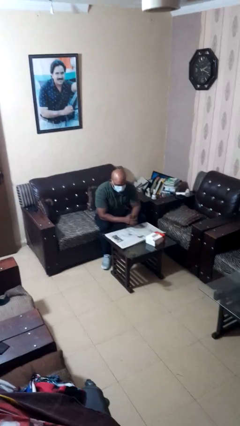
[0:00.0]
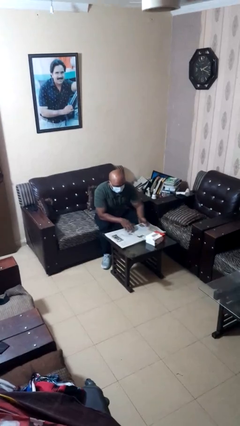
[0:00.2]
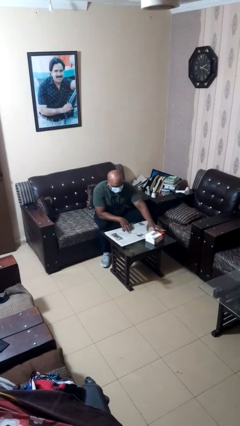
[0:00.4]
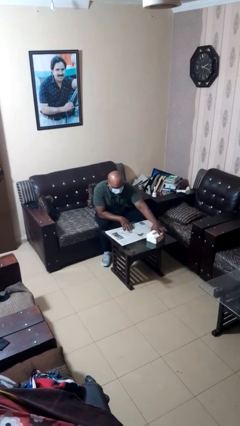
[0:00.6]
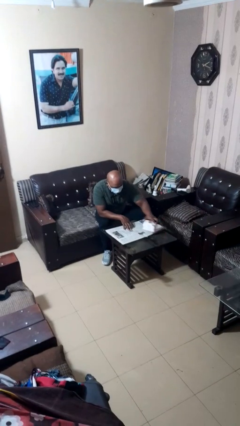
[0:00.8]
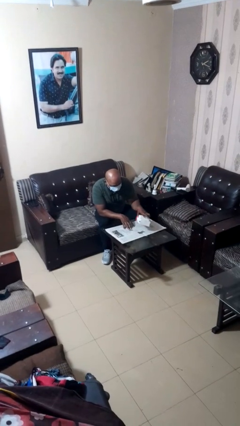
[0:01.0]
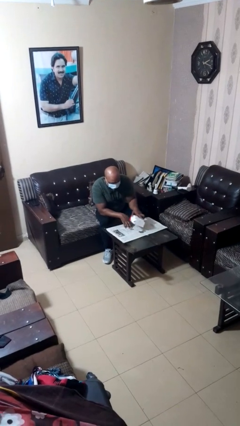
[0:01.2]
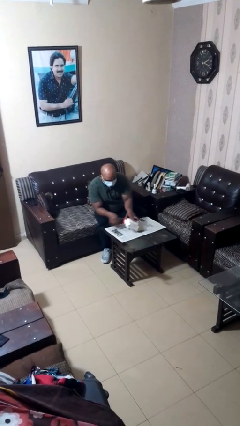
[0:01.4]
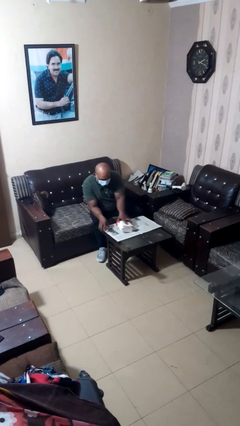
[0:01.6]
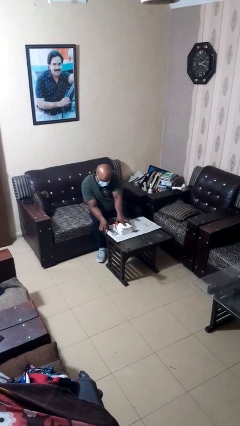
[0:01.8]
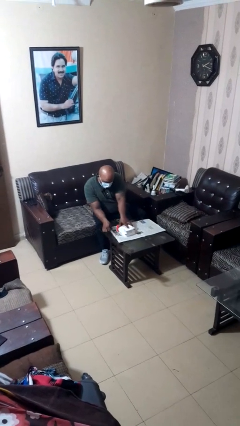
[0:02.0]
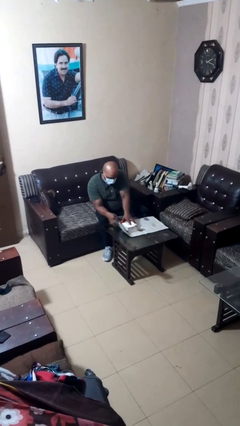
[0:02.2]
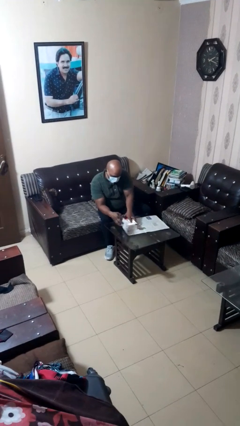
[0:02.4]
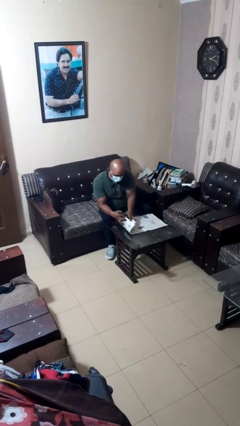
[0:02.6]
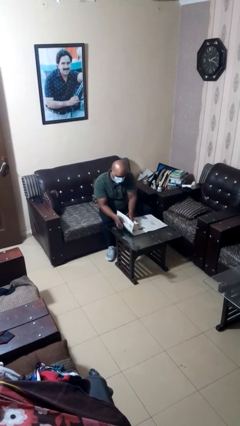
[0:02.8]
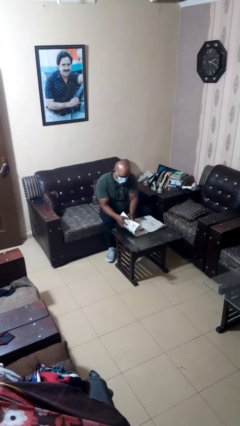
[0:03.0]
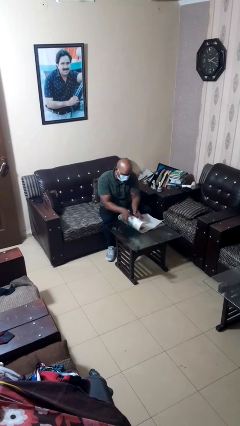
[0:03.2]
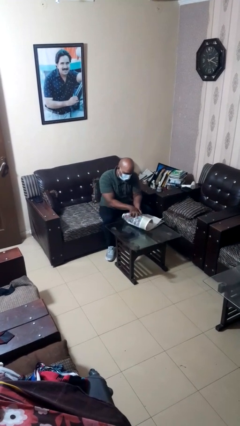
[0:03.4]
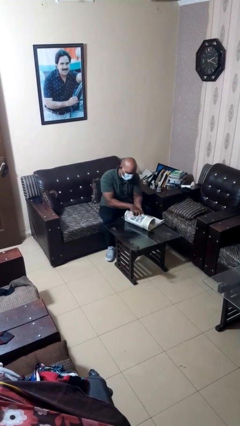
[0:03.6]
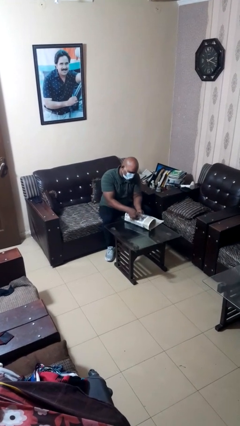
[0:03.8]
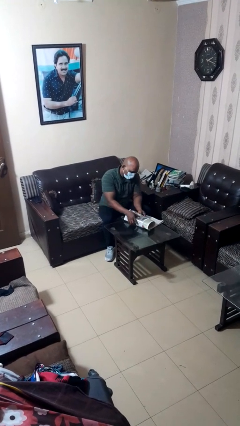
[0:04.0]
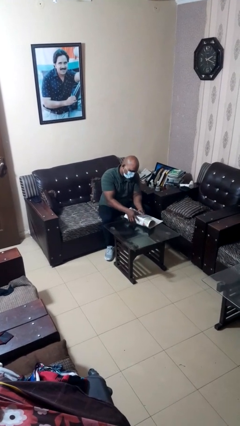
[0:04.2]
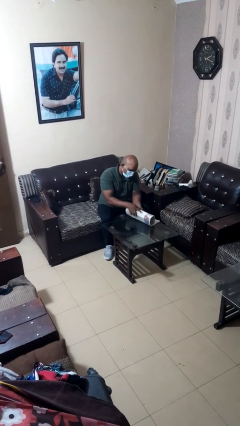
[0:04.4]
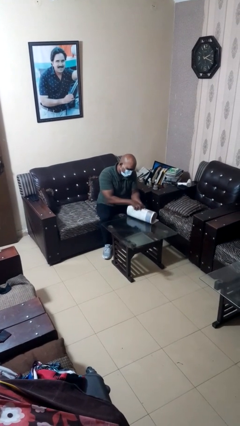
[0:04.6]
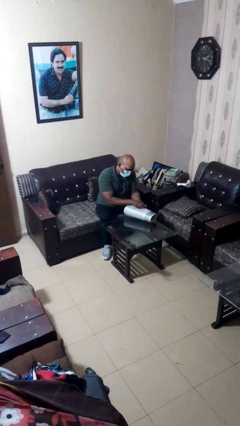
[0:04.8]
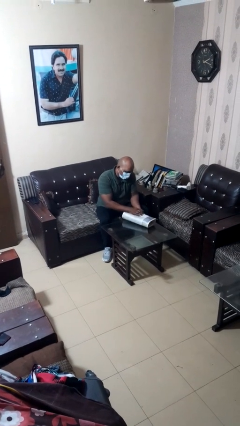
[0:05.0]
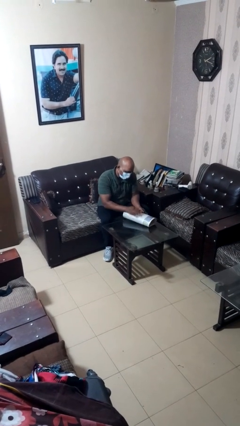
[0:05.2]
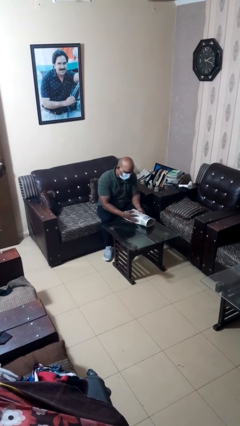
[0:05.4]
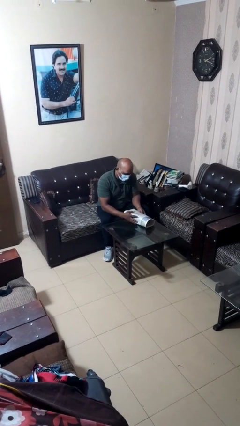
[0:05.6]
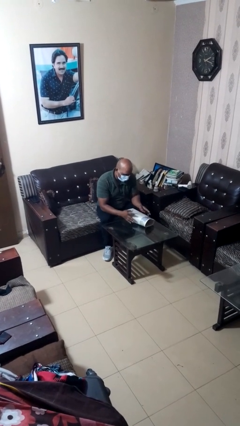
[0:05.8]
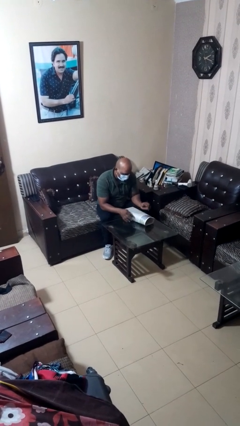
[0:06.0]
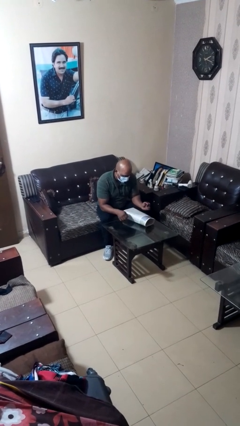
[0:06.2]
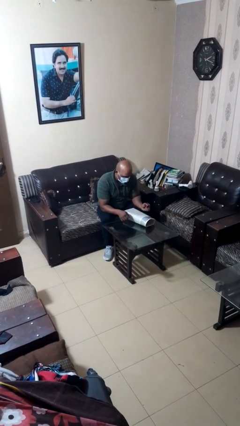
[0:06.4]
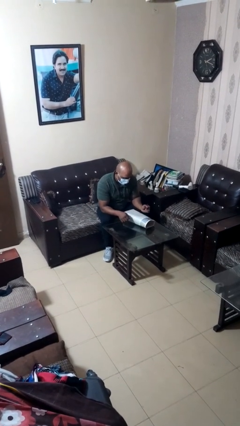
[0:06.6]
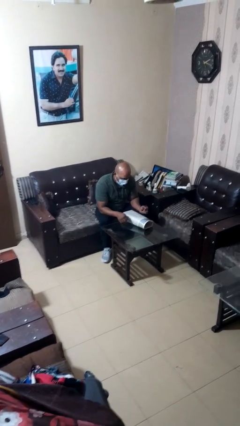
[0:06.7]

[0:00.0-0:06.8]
person wraps box

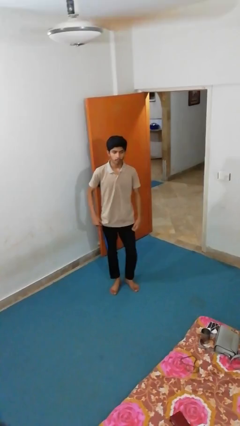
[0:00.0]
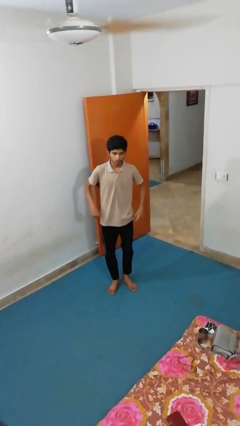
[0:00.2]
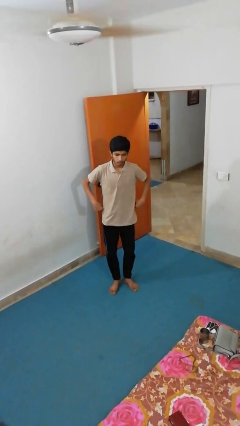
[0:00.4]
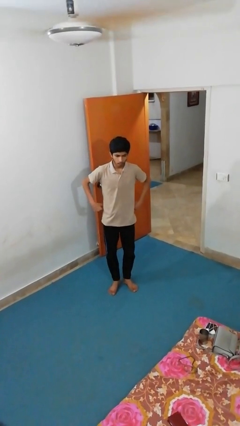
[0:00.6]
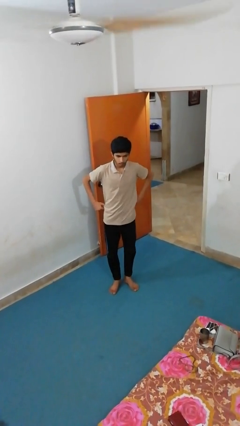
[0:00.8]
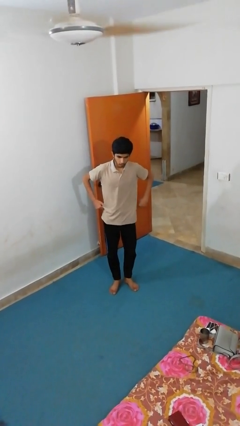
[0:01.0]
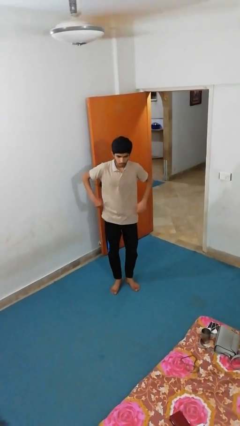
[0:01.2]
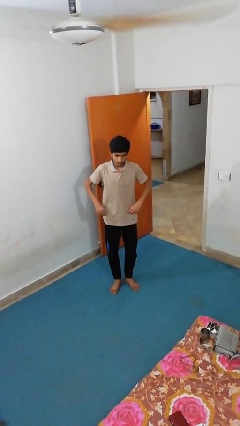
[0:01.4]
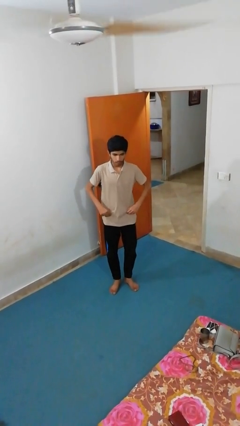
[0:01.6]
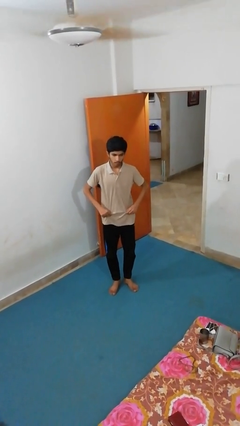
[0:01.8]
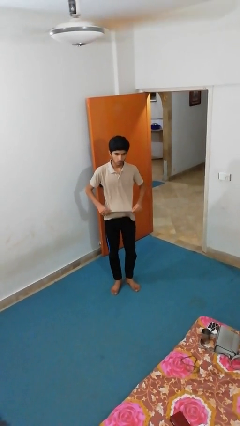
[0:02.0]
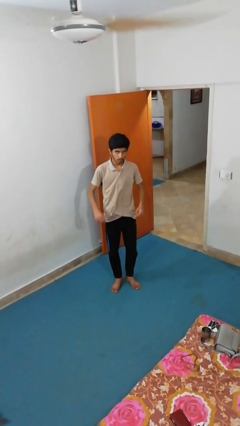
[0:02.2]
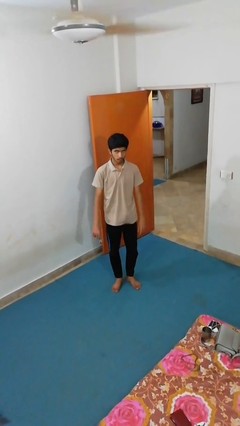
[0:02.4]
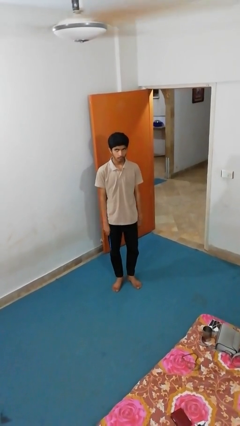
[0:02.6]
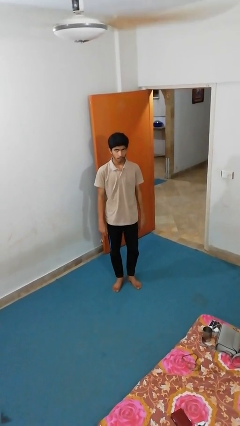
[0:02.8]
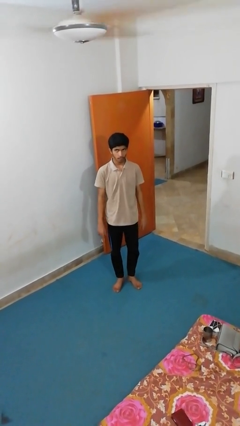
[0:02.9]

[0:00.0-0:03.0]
person hikes up pants

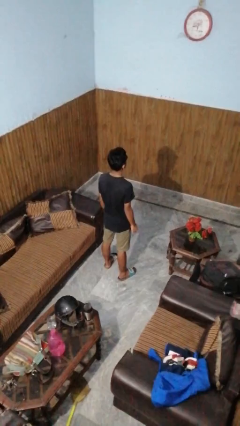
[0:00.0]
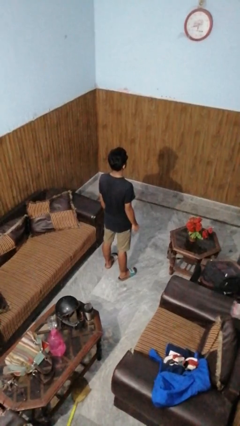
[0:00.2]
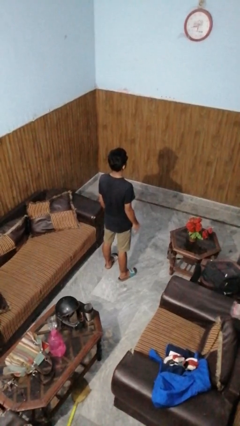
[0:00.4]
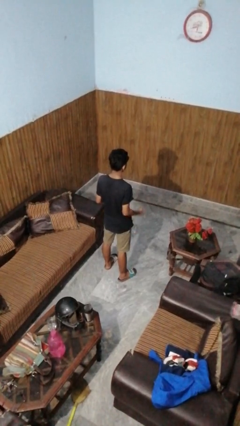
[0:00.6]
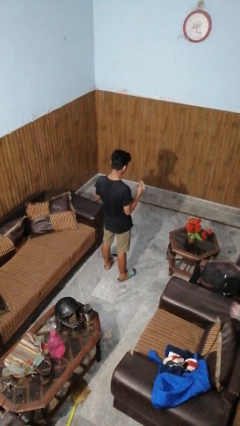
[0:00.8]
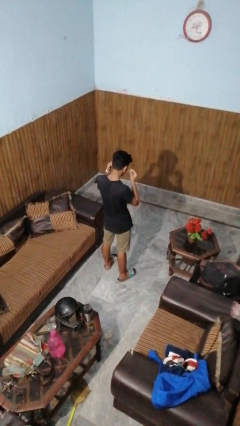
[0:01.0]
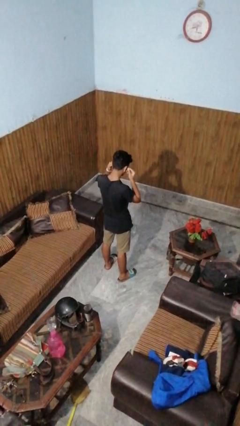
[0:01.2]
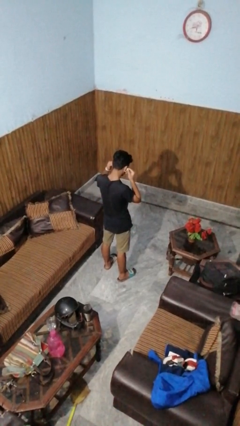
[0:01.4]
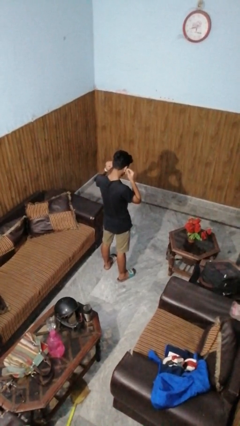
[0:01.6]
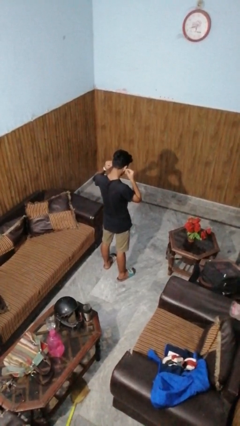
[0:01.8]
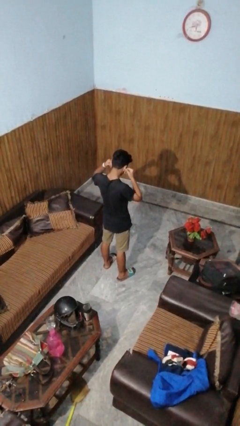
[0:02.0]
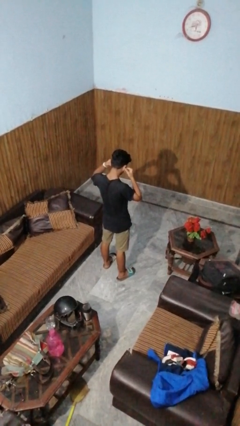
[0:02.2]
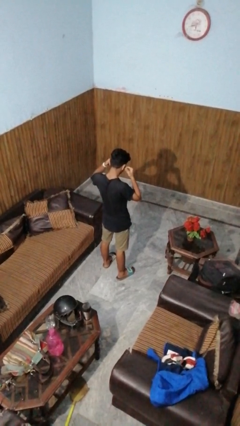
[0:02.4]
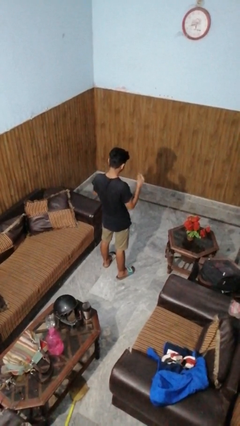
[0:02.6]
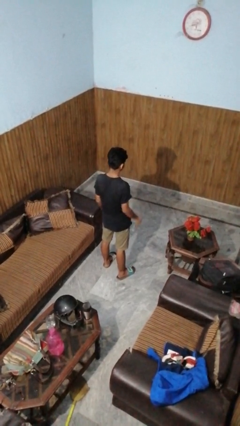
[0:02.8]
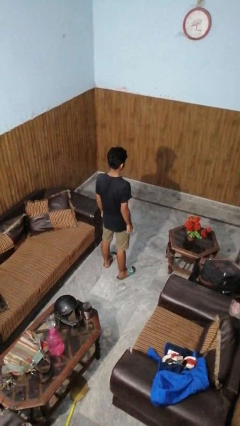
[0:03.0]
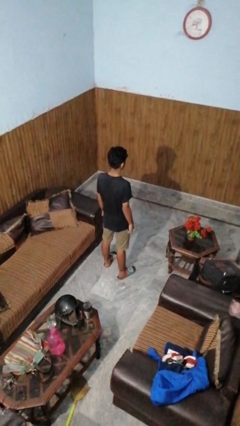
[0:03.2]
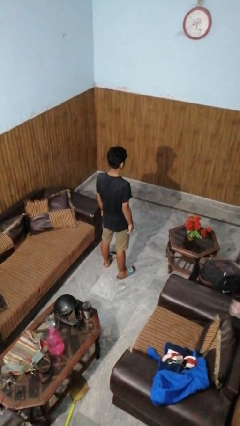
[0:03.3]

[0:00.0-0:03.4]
person puts on headphones

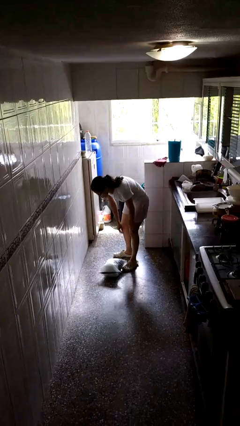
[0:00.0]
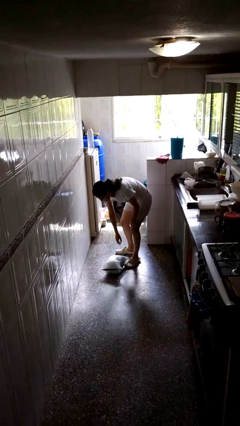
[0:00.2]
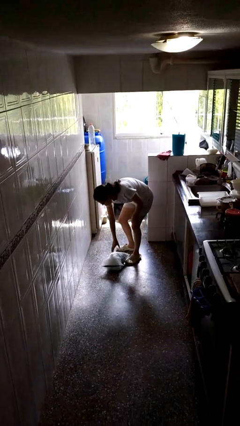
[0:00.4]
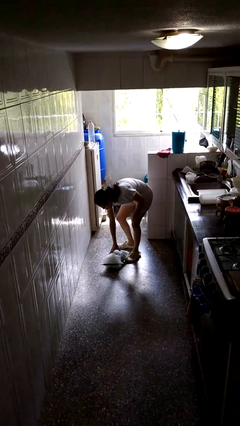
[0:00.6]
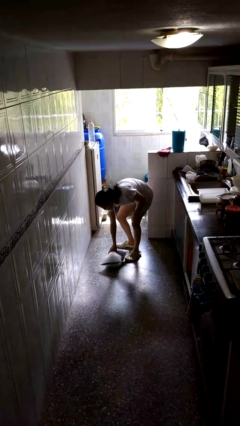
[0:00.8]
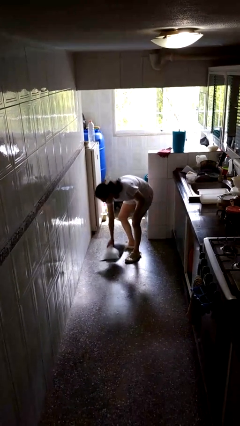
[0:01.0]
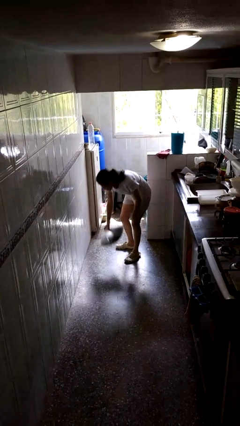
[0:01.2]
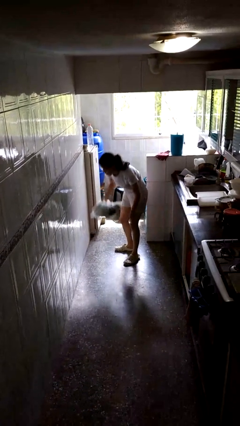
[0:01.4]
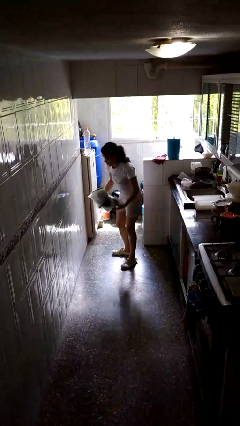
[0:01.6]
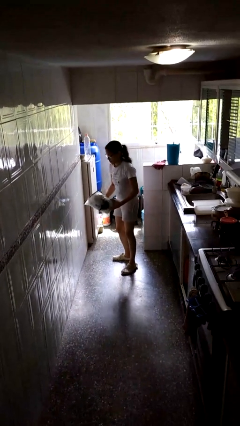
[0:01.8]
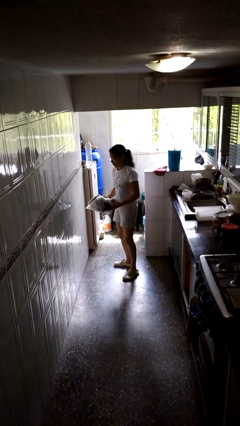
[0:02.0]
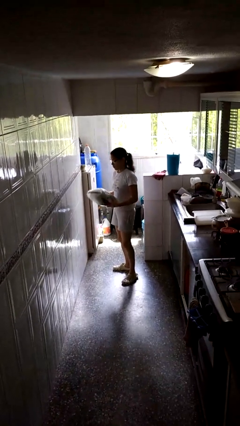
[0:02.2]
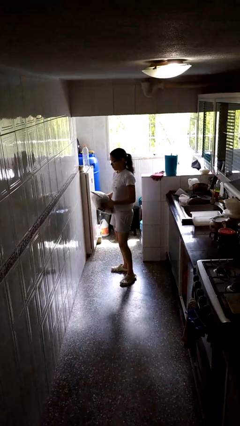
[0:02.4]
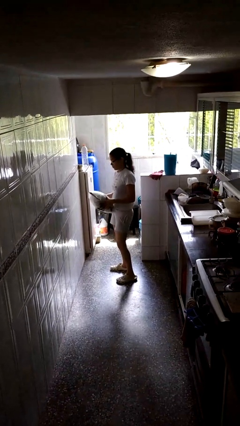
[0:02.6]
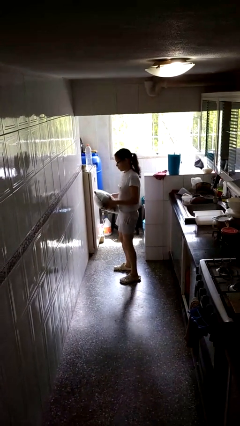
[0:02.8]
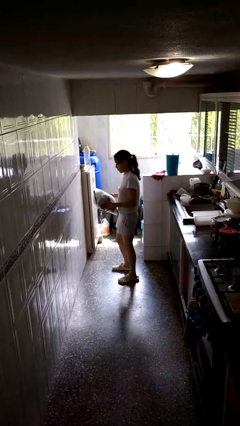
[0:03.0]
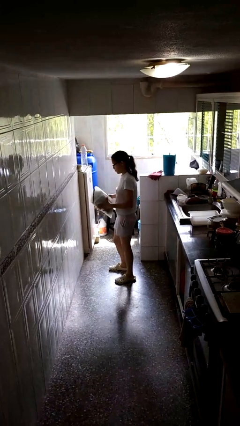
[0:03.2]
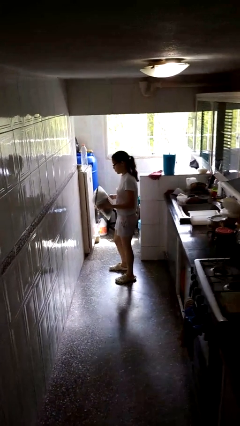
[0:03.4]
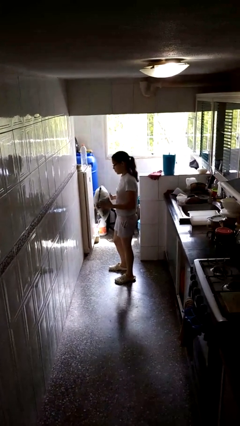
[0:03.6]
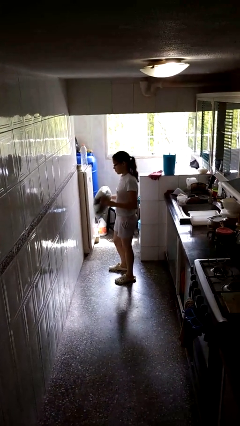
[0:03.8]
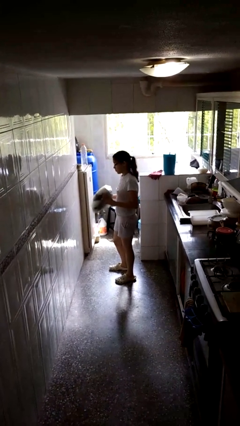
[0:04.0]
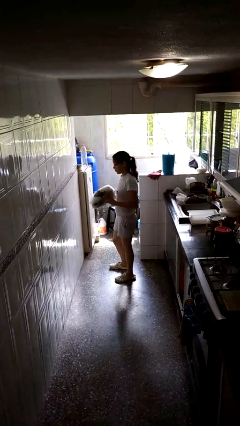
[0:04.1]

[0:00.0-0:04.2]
person picks up object from floor

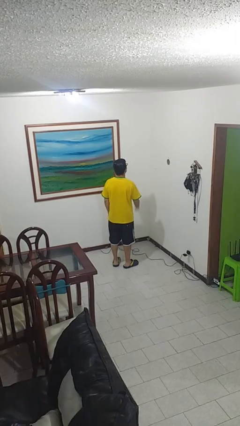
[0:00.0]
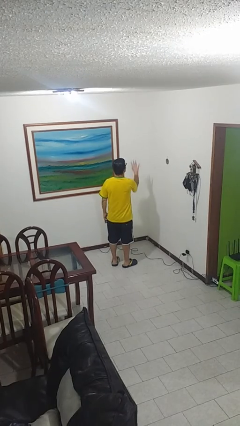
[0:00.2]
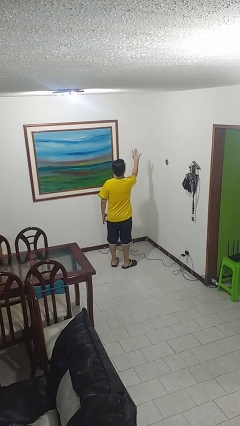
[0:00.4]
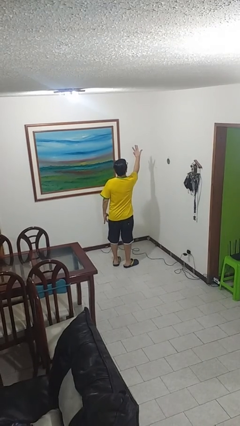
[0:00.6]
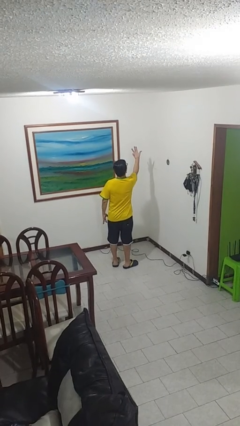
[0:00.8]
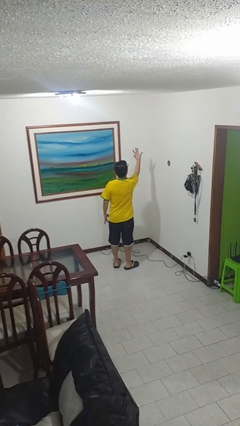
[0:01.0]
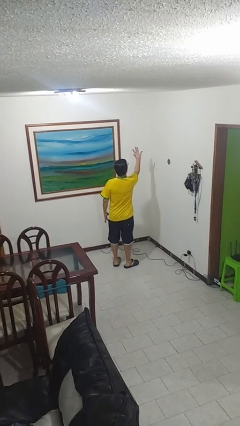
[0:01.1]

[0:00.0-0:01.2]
person gestures number four
